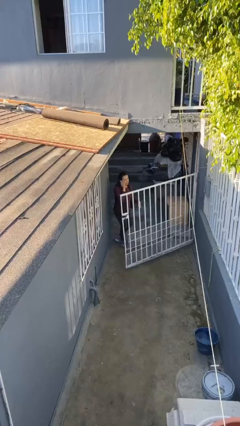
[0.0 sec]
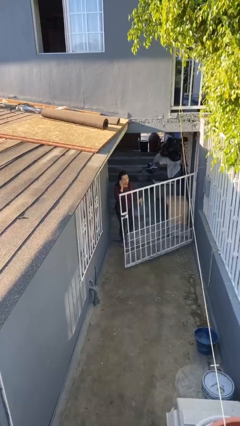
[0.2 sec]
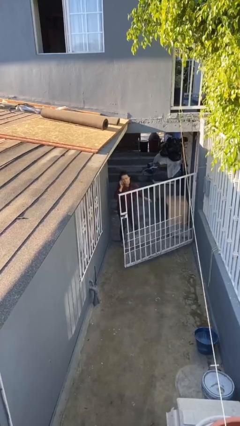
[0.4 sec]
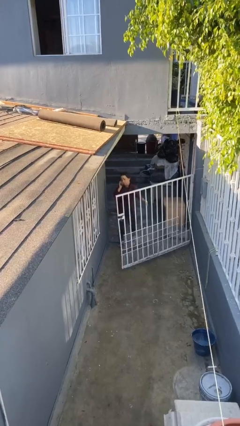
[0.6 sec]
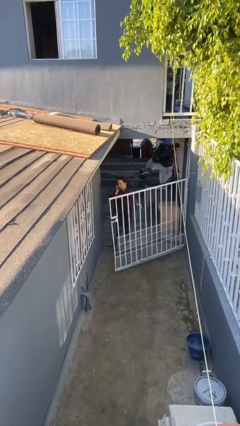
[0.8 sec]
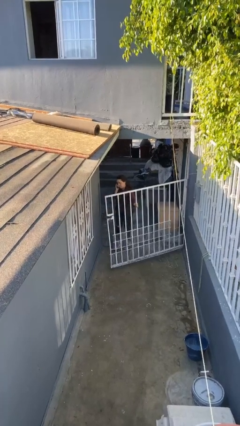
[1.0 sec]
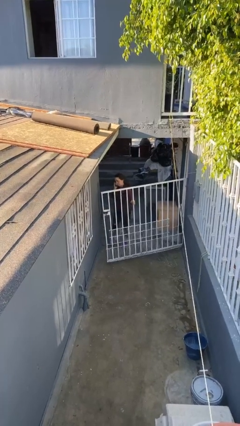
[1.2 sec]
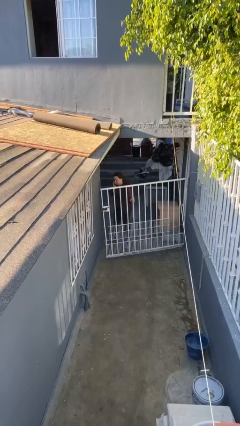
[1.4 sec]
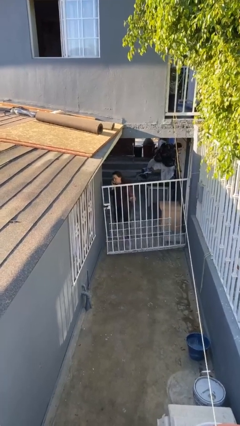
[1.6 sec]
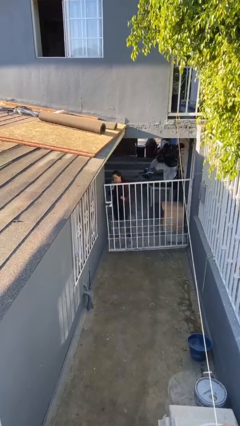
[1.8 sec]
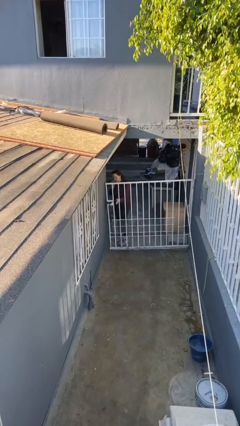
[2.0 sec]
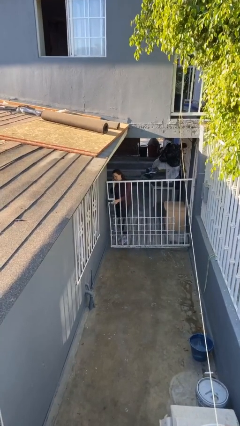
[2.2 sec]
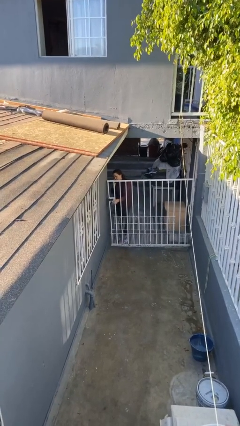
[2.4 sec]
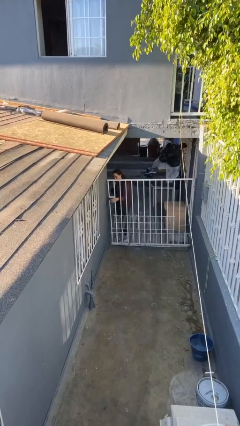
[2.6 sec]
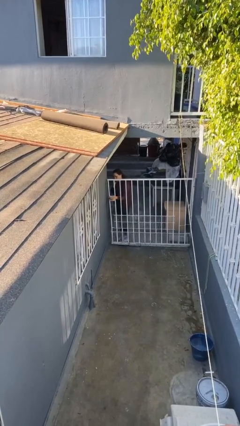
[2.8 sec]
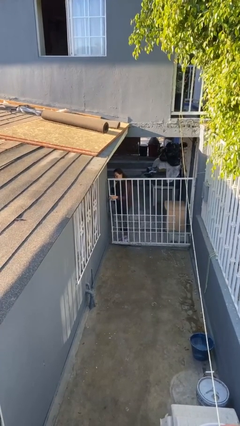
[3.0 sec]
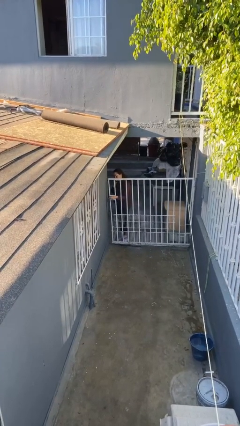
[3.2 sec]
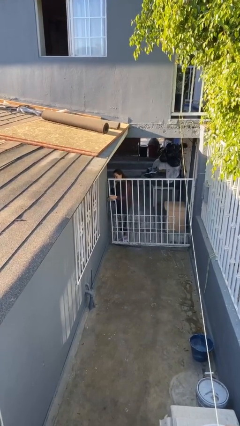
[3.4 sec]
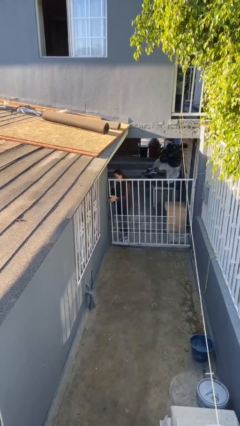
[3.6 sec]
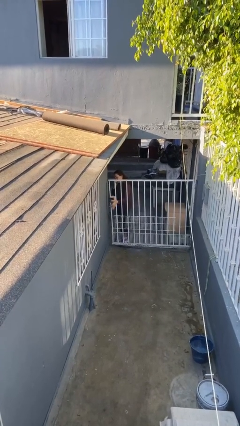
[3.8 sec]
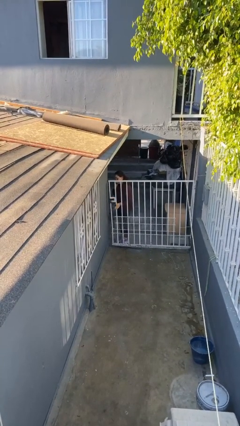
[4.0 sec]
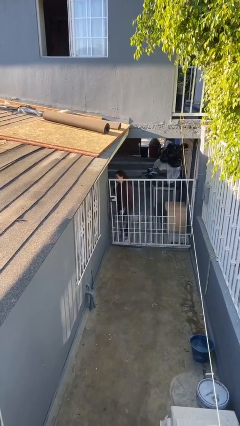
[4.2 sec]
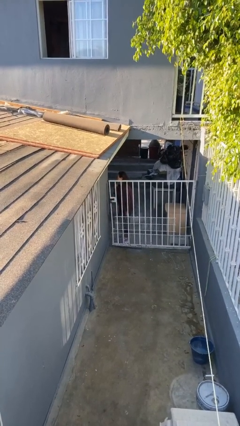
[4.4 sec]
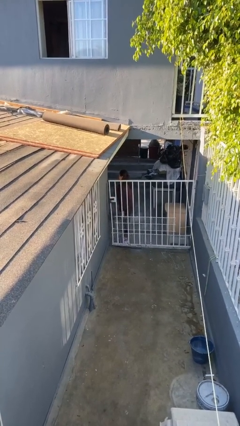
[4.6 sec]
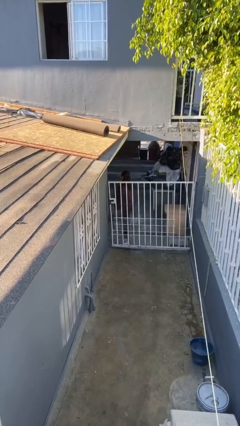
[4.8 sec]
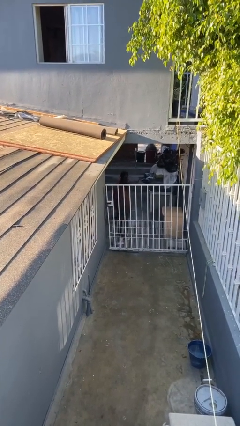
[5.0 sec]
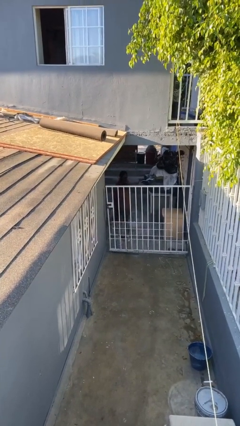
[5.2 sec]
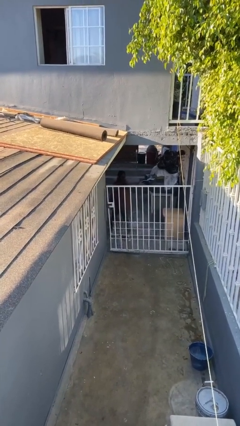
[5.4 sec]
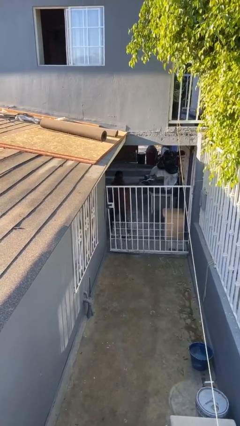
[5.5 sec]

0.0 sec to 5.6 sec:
person closes facility door

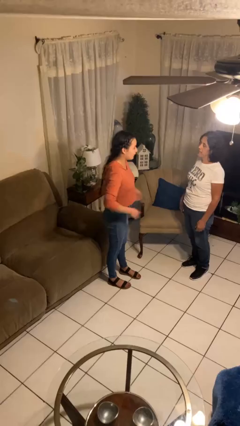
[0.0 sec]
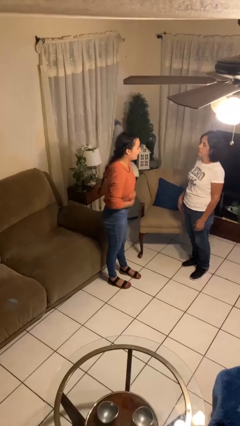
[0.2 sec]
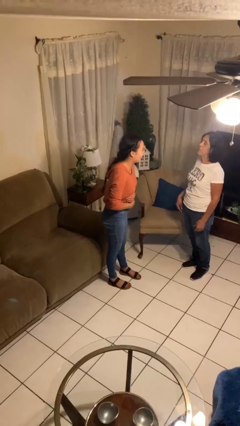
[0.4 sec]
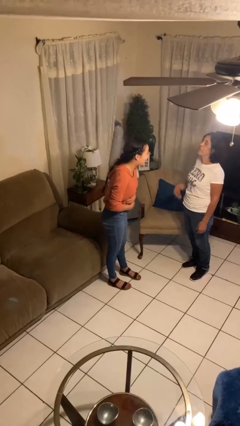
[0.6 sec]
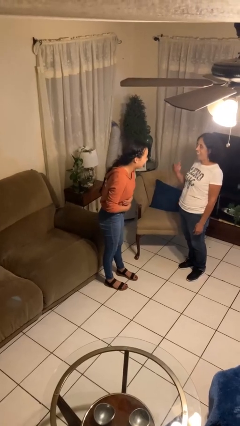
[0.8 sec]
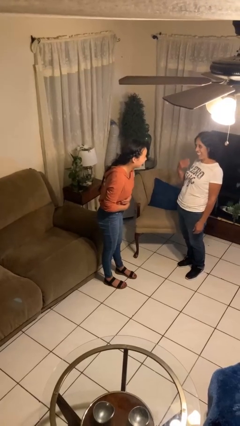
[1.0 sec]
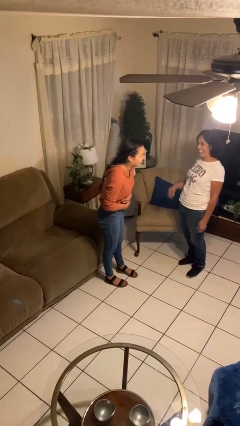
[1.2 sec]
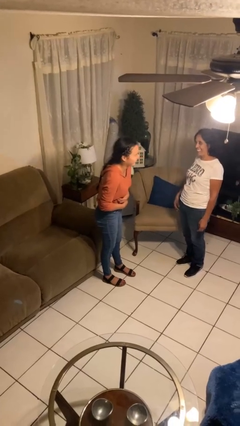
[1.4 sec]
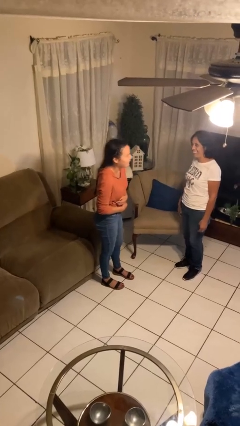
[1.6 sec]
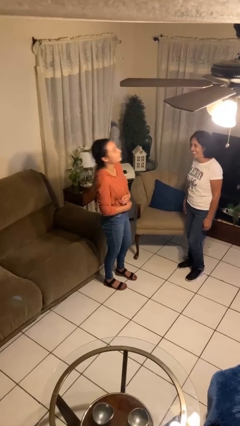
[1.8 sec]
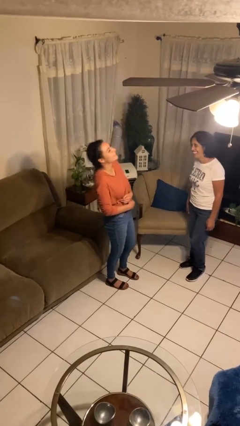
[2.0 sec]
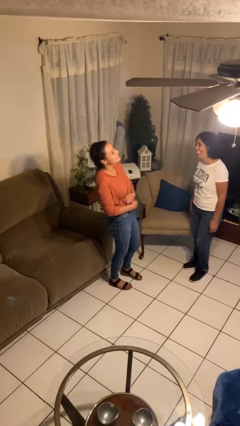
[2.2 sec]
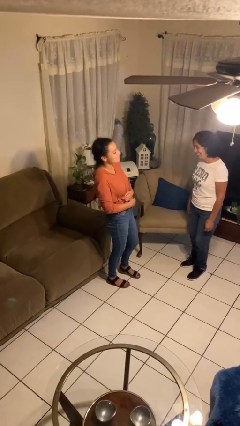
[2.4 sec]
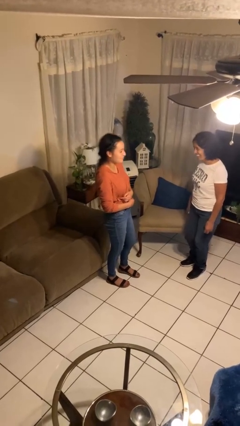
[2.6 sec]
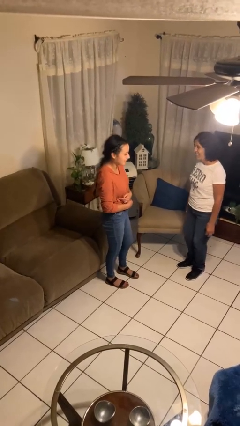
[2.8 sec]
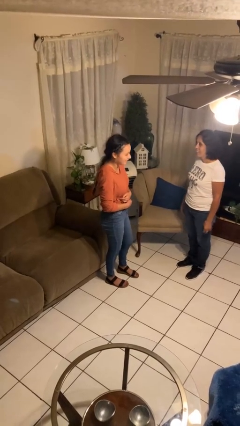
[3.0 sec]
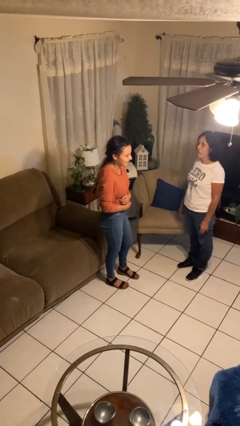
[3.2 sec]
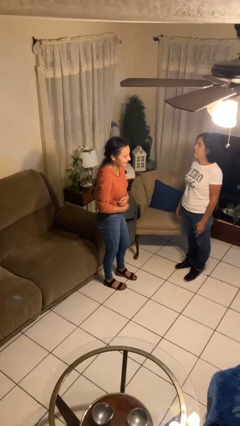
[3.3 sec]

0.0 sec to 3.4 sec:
person laughs with person

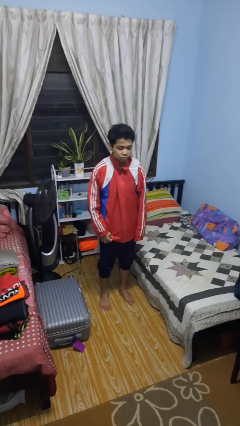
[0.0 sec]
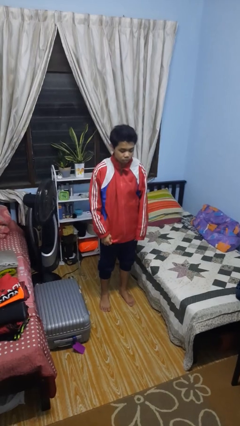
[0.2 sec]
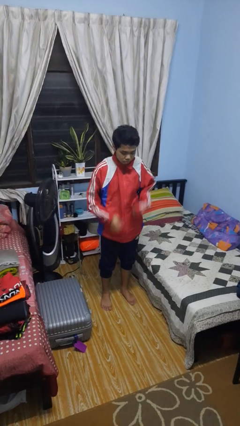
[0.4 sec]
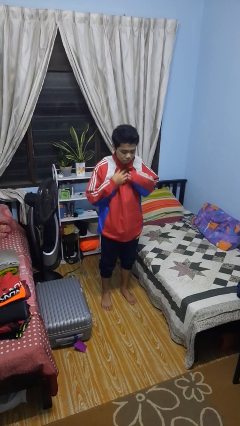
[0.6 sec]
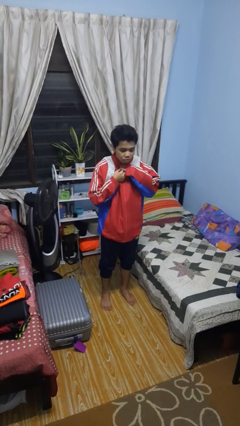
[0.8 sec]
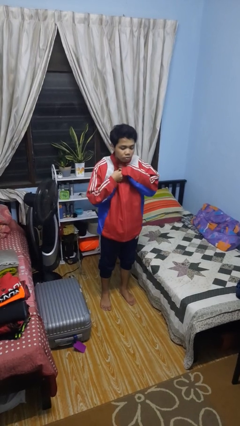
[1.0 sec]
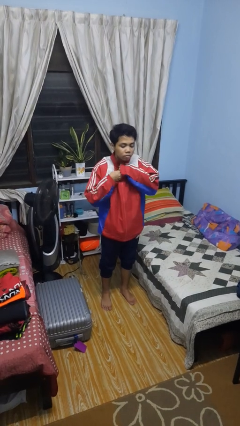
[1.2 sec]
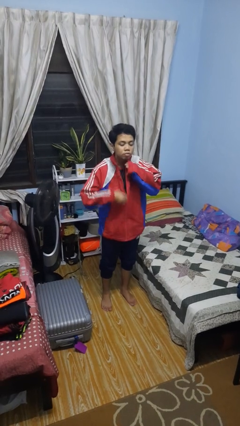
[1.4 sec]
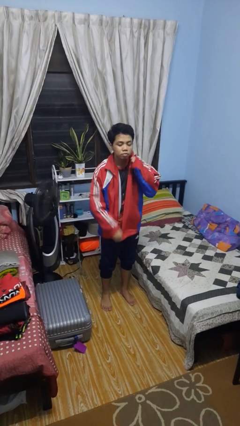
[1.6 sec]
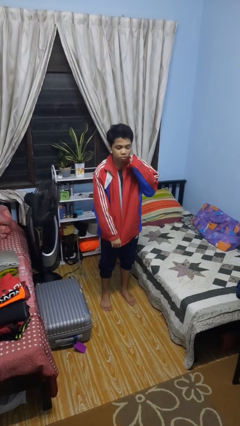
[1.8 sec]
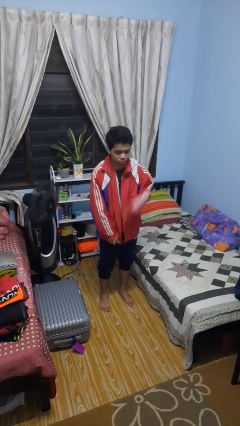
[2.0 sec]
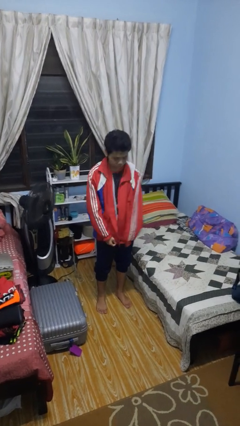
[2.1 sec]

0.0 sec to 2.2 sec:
person unzips jacket

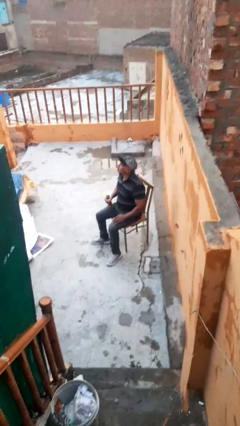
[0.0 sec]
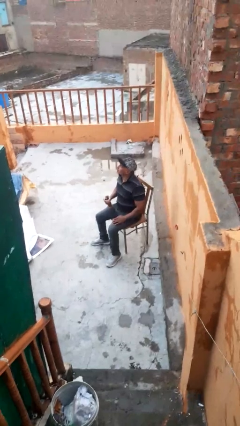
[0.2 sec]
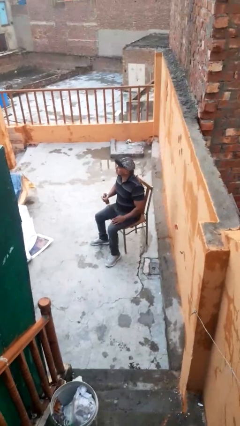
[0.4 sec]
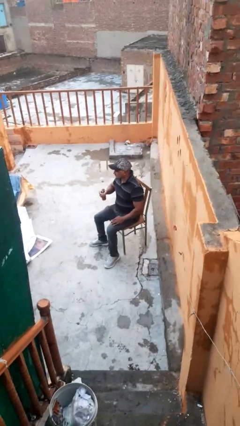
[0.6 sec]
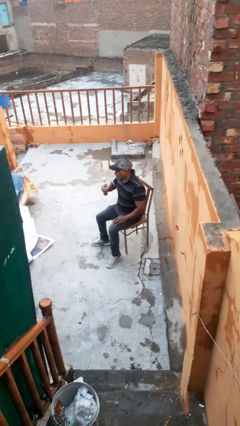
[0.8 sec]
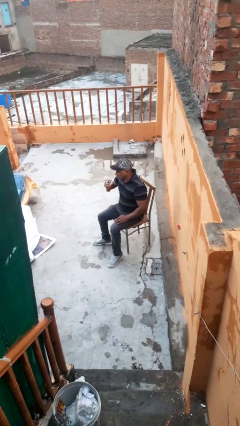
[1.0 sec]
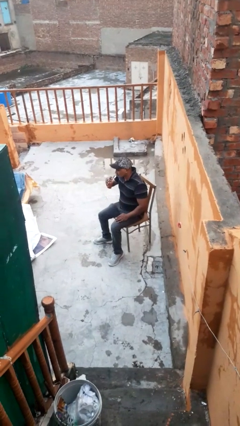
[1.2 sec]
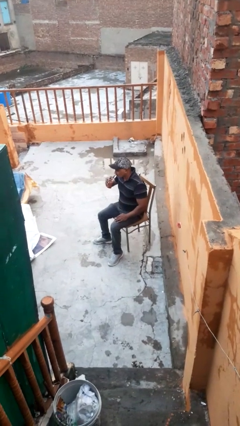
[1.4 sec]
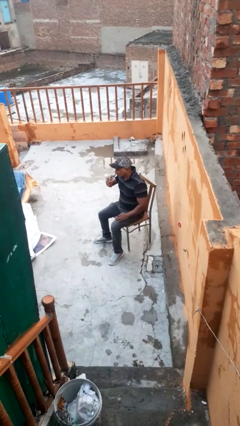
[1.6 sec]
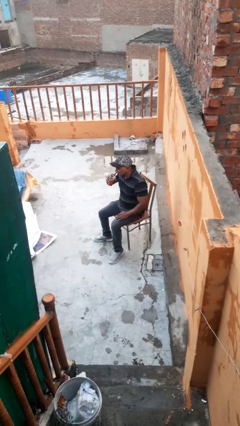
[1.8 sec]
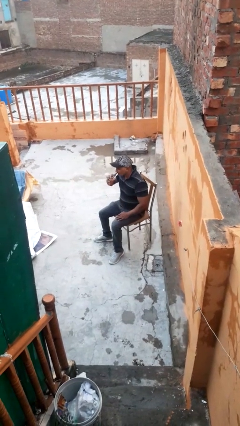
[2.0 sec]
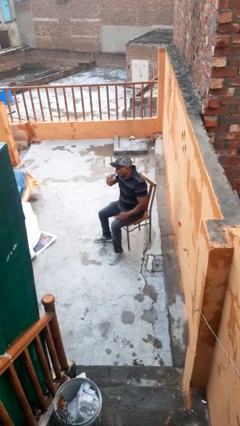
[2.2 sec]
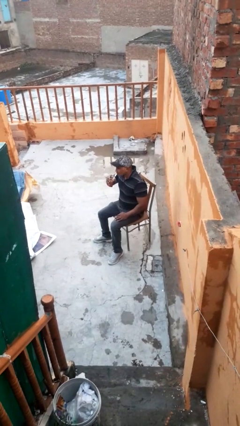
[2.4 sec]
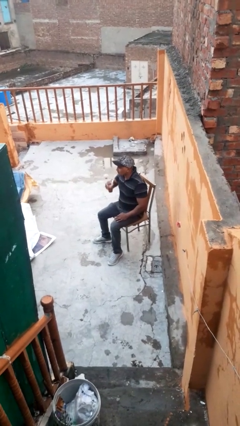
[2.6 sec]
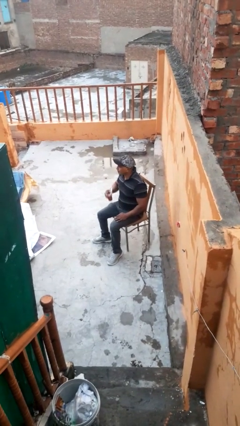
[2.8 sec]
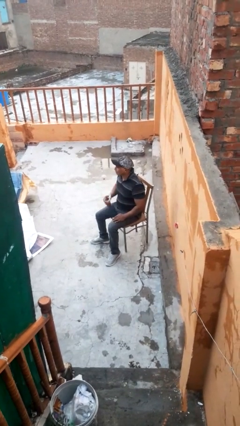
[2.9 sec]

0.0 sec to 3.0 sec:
person drinks from straw

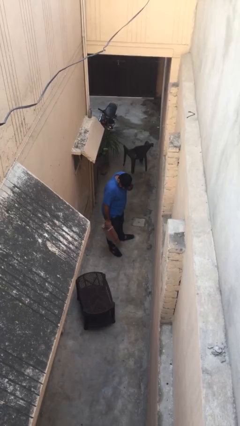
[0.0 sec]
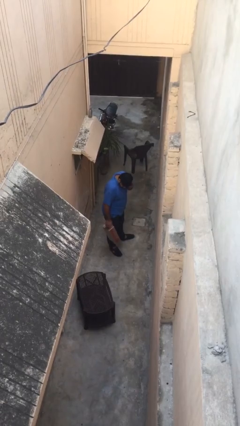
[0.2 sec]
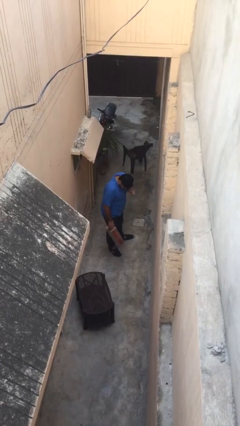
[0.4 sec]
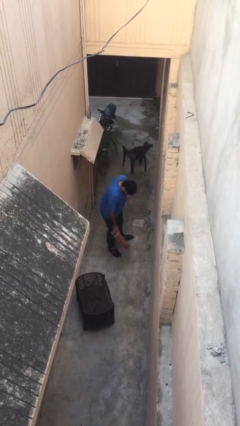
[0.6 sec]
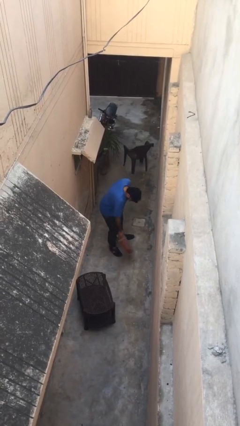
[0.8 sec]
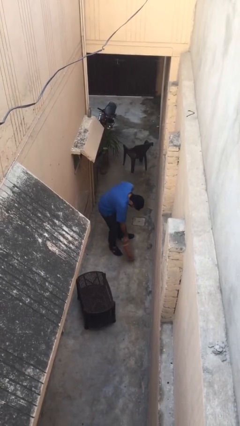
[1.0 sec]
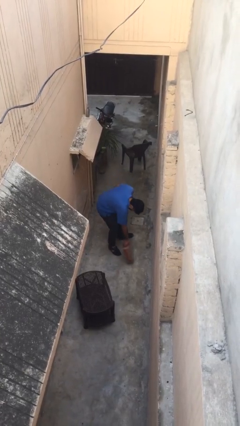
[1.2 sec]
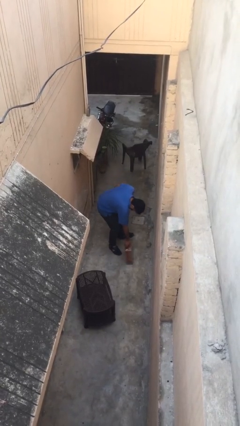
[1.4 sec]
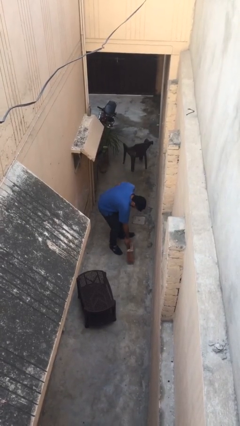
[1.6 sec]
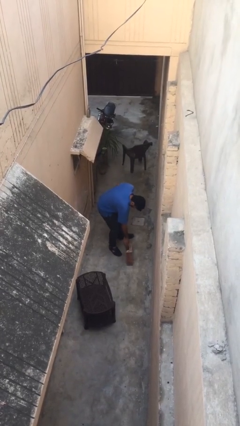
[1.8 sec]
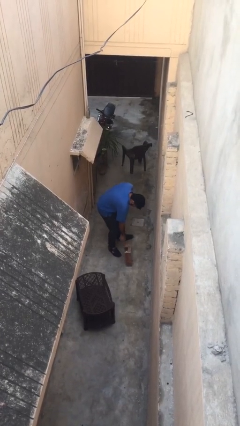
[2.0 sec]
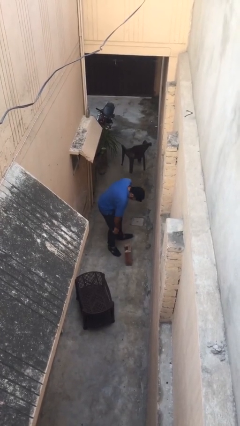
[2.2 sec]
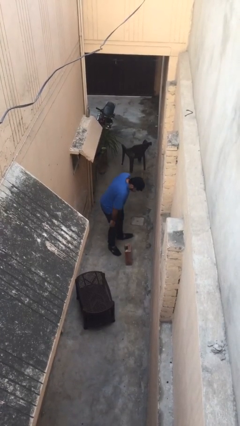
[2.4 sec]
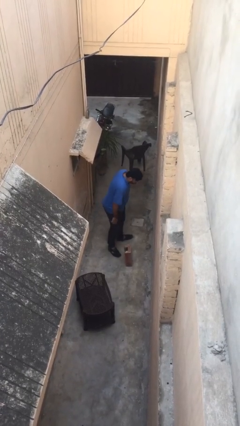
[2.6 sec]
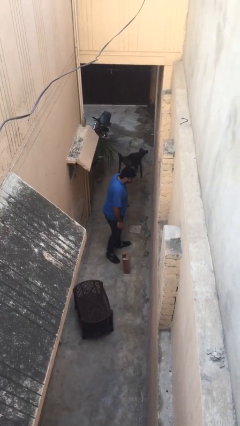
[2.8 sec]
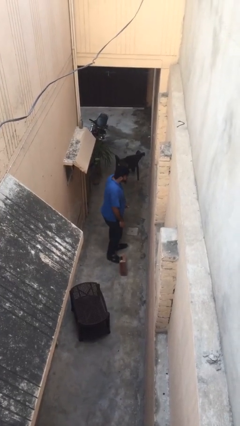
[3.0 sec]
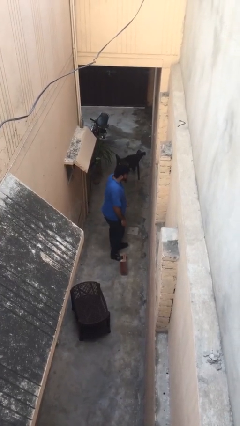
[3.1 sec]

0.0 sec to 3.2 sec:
person puts down object on floor
